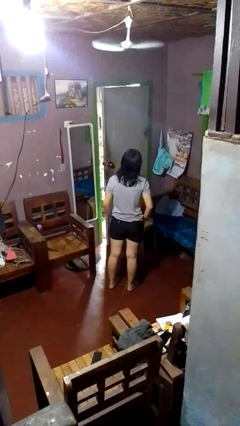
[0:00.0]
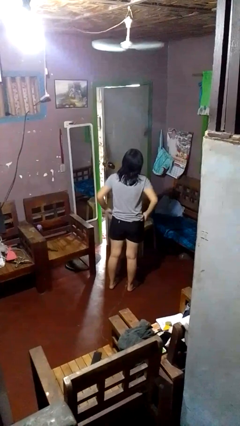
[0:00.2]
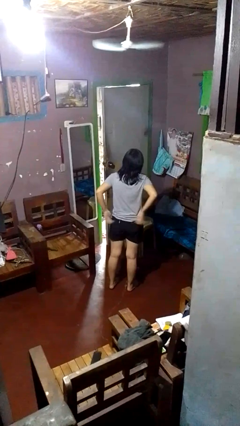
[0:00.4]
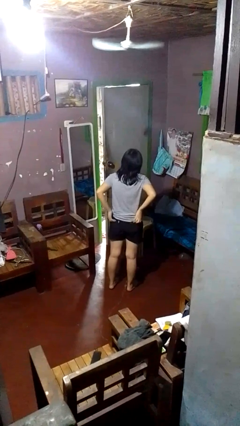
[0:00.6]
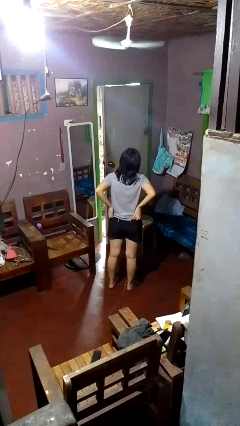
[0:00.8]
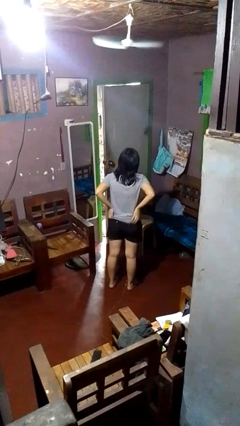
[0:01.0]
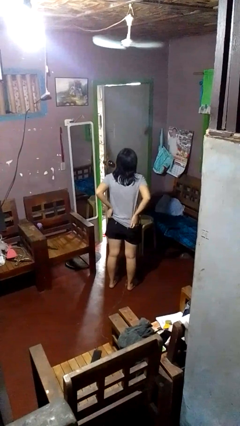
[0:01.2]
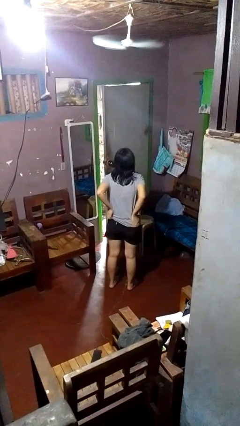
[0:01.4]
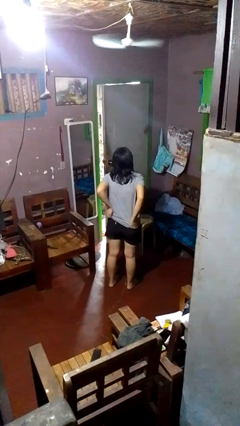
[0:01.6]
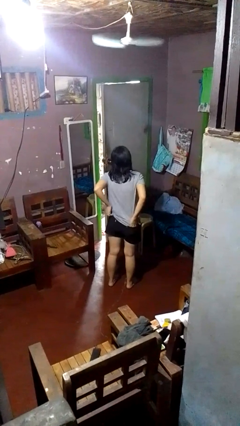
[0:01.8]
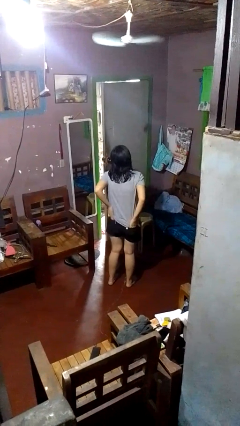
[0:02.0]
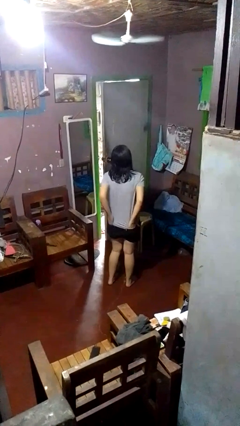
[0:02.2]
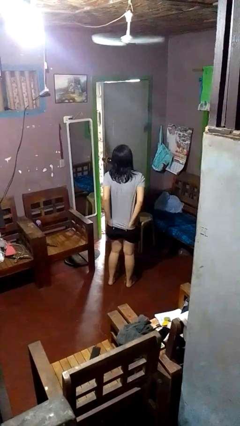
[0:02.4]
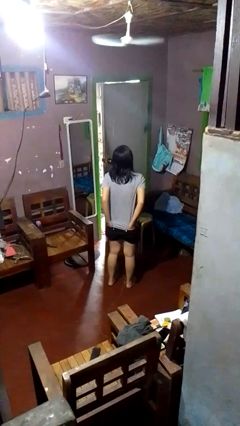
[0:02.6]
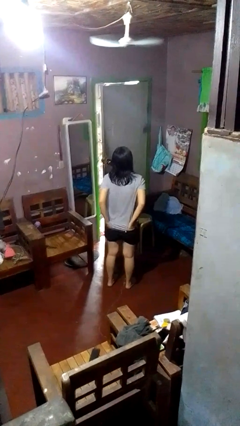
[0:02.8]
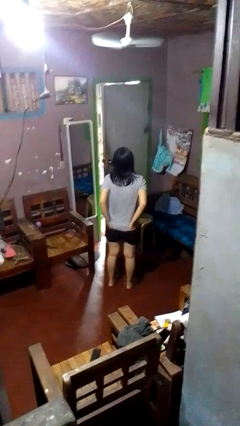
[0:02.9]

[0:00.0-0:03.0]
person puts hands in back pockets

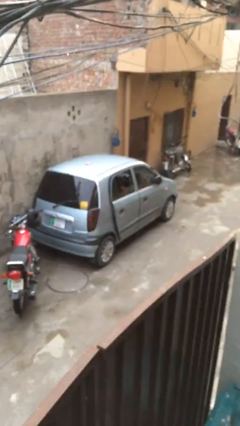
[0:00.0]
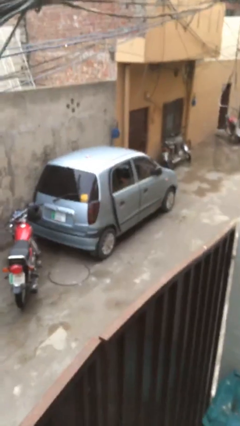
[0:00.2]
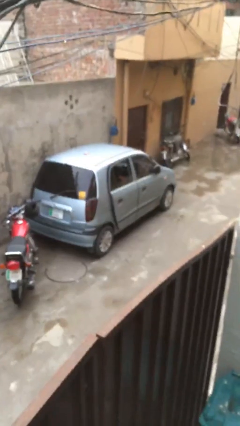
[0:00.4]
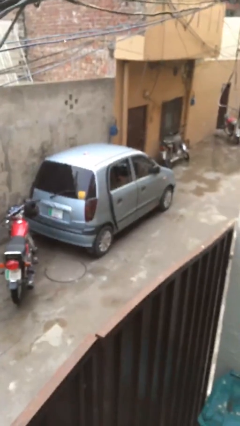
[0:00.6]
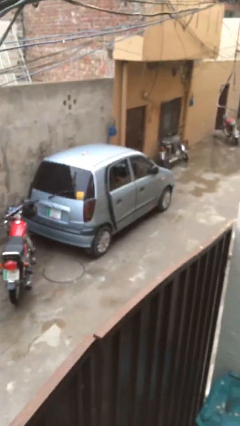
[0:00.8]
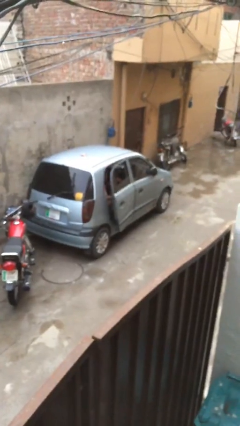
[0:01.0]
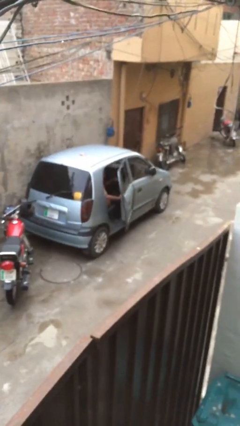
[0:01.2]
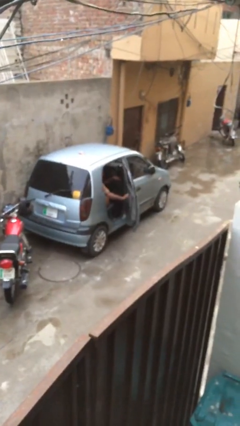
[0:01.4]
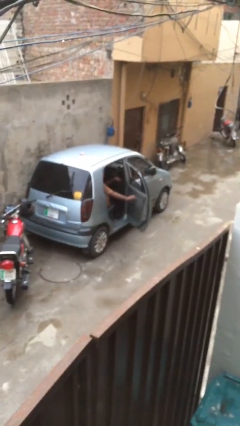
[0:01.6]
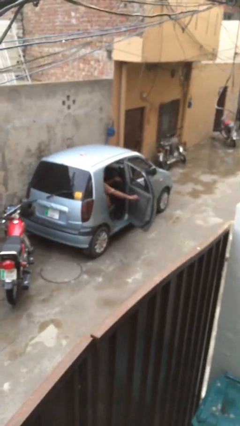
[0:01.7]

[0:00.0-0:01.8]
person opens car door

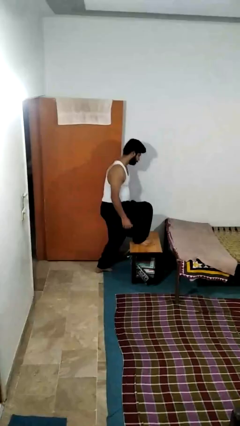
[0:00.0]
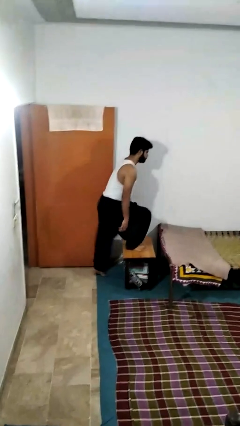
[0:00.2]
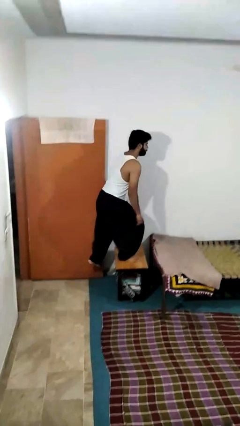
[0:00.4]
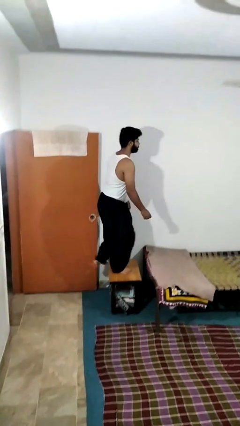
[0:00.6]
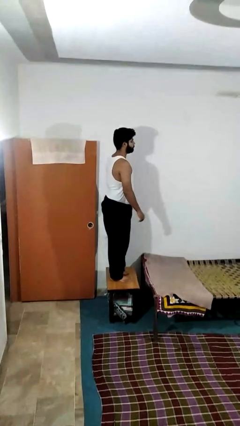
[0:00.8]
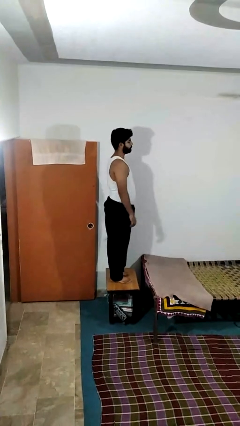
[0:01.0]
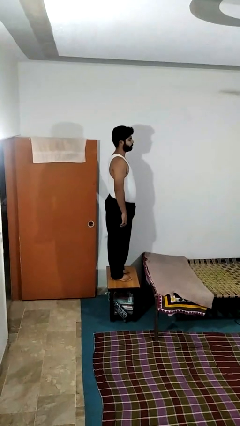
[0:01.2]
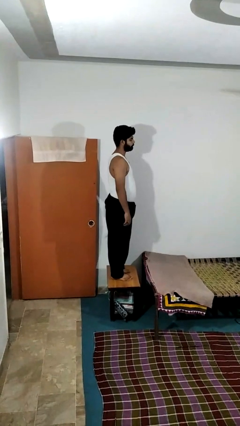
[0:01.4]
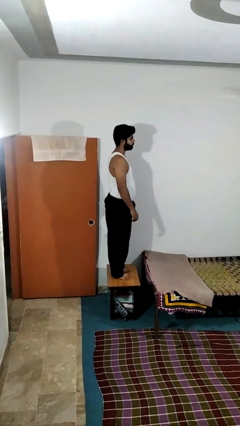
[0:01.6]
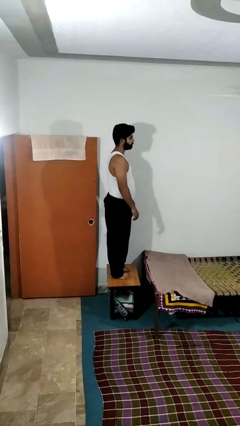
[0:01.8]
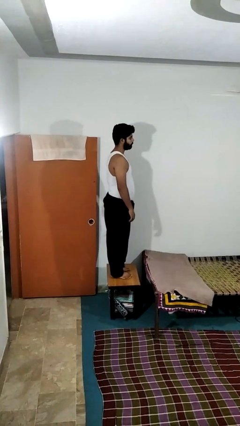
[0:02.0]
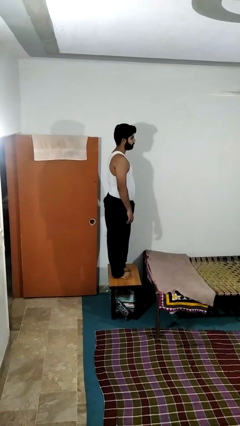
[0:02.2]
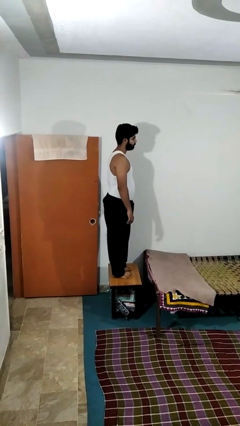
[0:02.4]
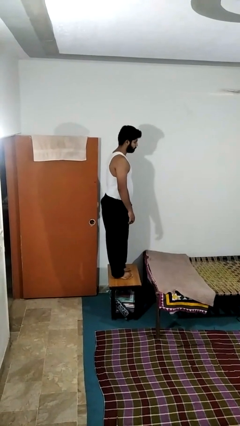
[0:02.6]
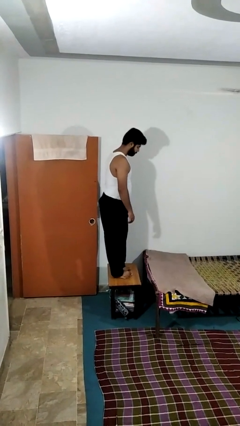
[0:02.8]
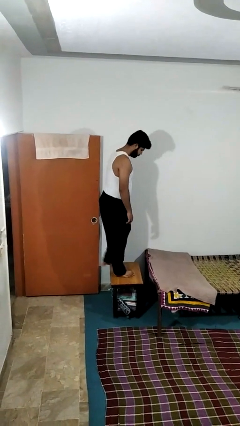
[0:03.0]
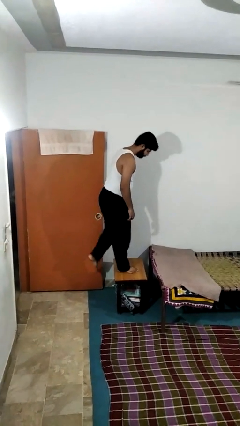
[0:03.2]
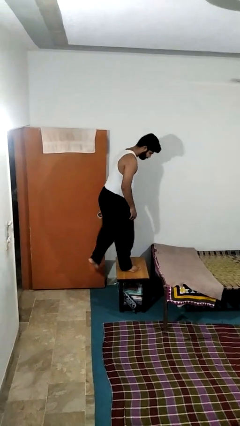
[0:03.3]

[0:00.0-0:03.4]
person climbs on table

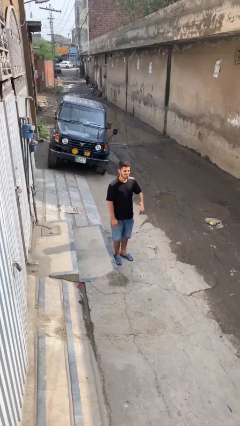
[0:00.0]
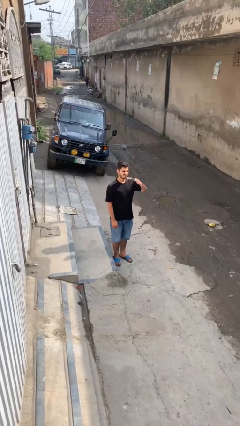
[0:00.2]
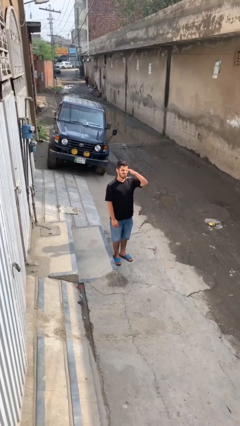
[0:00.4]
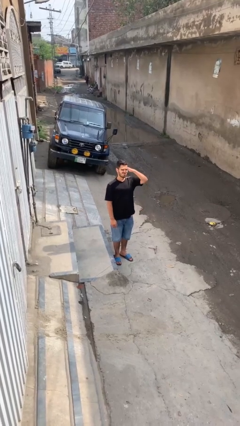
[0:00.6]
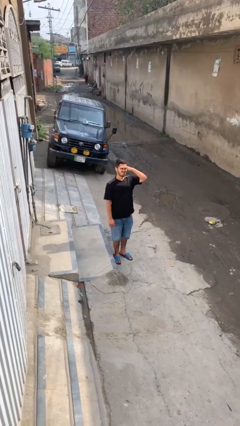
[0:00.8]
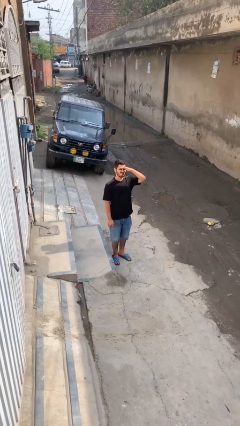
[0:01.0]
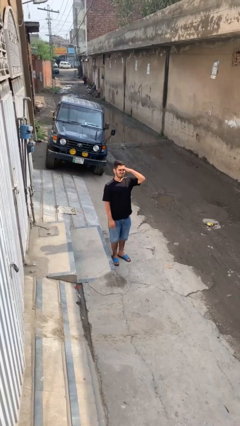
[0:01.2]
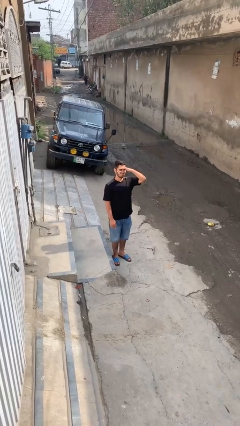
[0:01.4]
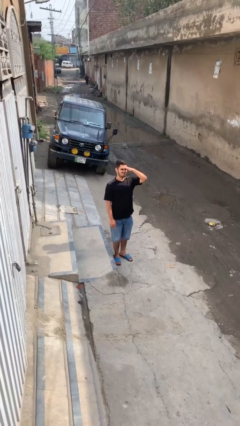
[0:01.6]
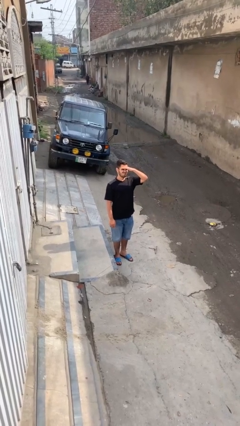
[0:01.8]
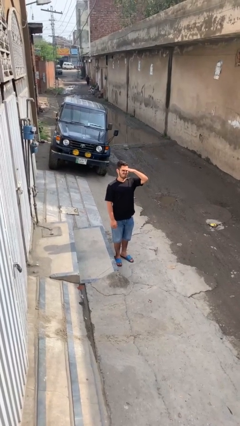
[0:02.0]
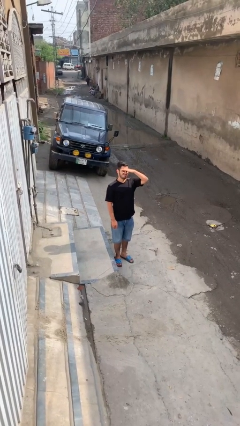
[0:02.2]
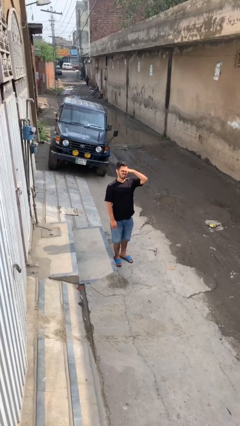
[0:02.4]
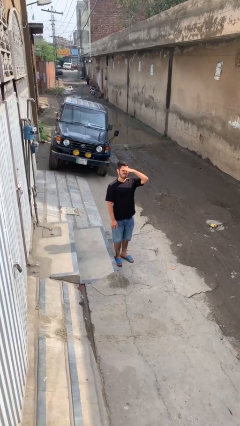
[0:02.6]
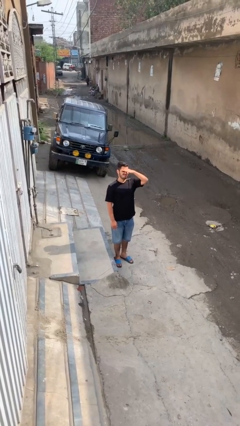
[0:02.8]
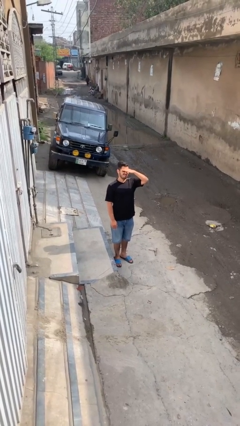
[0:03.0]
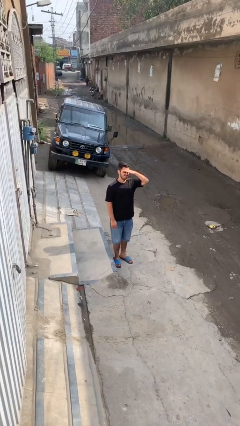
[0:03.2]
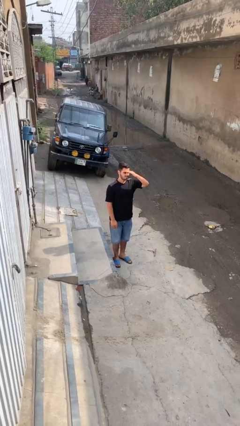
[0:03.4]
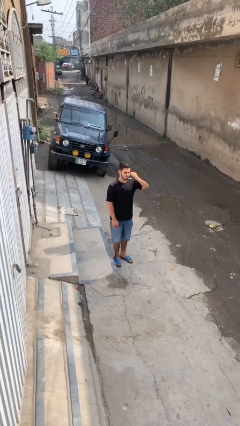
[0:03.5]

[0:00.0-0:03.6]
person shades eyes

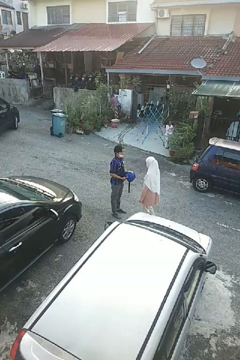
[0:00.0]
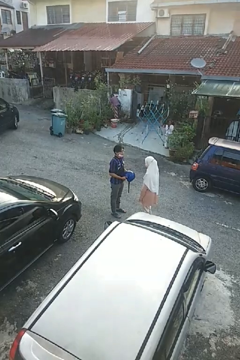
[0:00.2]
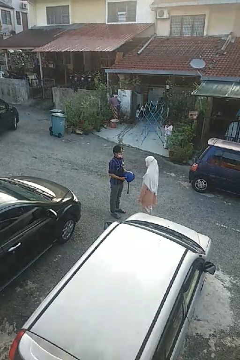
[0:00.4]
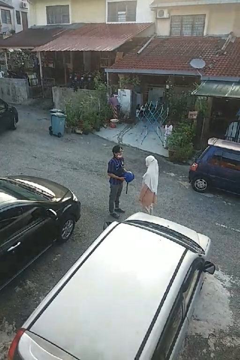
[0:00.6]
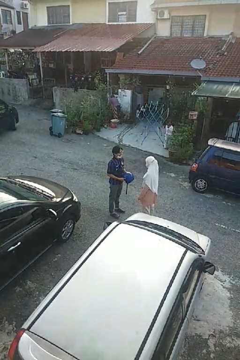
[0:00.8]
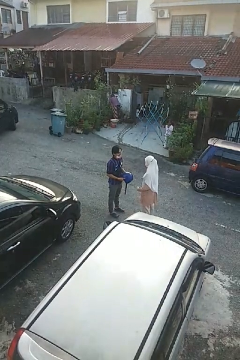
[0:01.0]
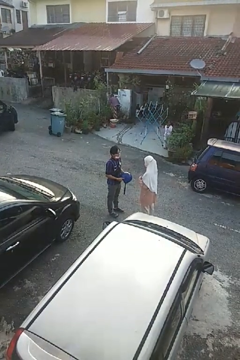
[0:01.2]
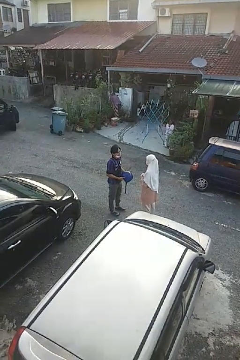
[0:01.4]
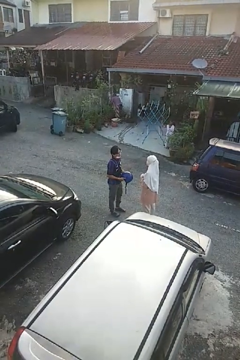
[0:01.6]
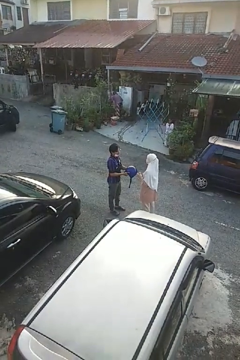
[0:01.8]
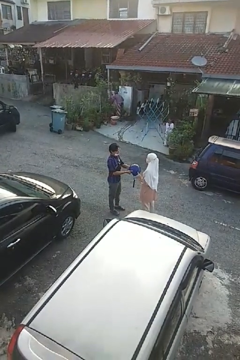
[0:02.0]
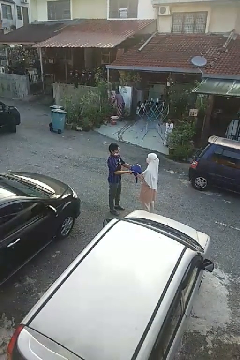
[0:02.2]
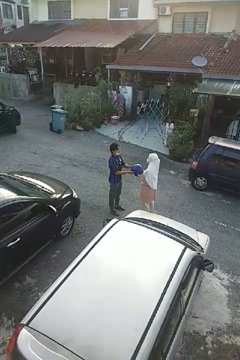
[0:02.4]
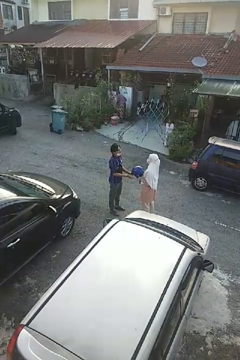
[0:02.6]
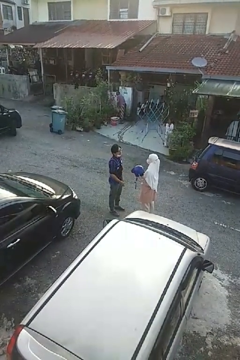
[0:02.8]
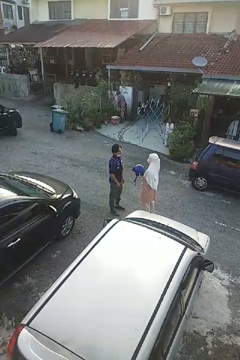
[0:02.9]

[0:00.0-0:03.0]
person transfers object to person

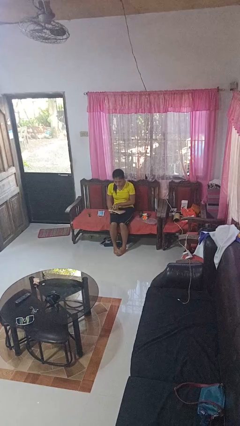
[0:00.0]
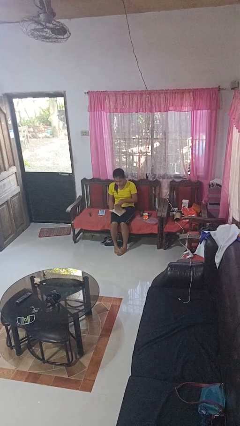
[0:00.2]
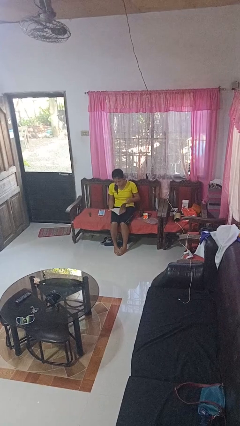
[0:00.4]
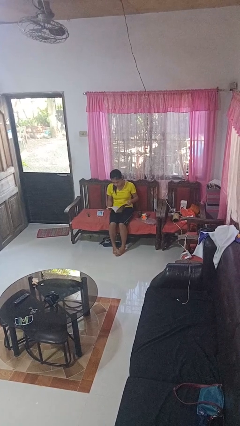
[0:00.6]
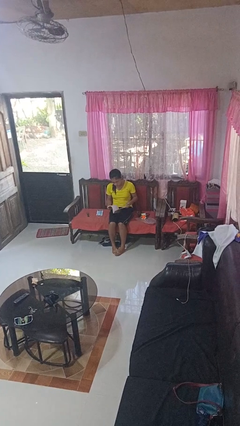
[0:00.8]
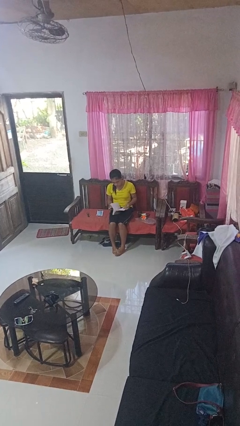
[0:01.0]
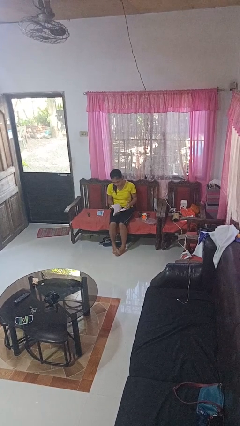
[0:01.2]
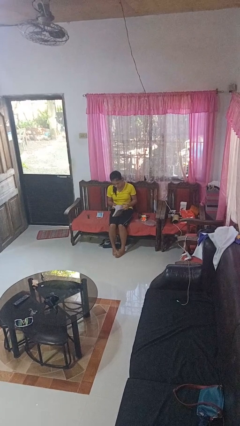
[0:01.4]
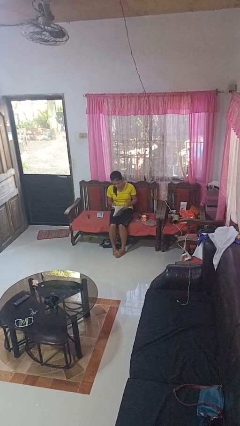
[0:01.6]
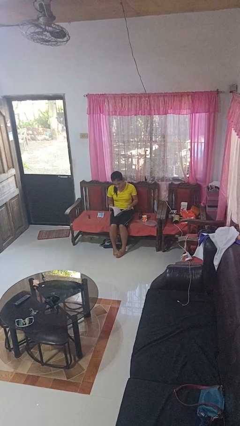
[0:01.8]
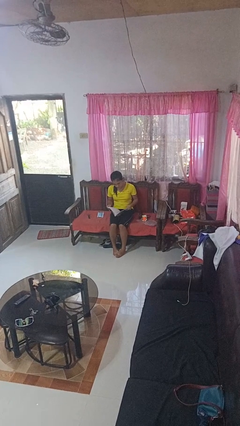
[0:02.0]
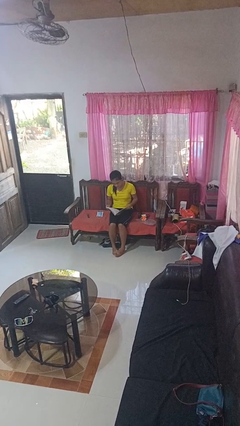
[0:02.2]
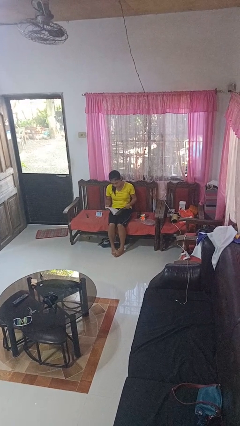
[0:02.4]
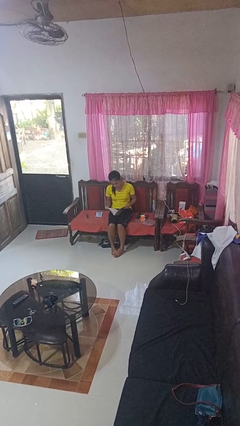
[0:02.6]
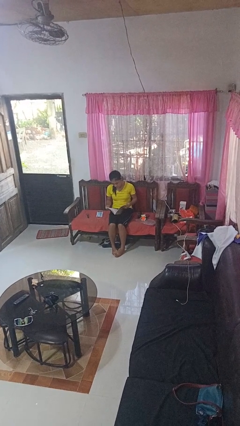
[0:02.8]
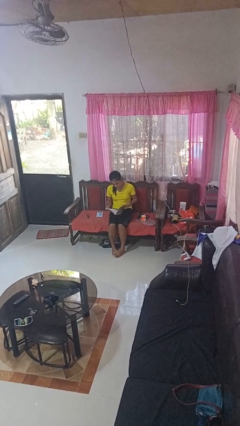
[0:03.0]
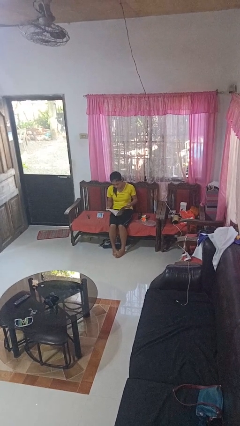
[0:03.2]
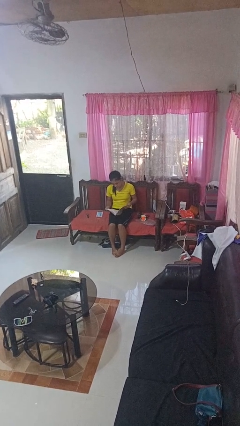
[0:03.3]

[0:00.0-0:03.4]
person reads book
